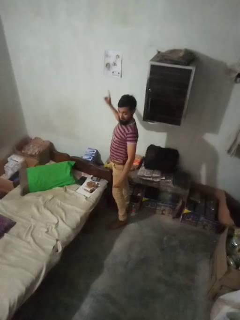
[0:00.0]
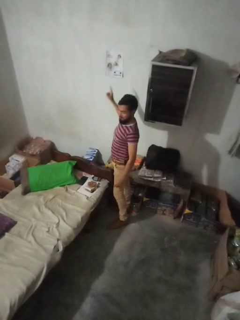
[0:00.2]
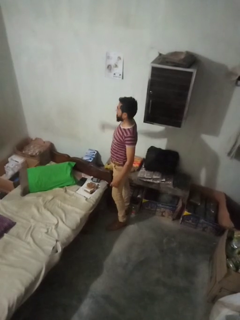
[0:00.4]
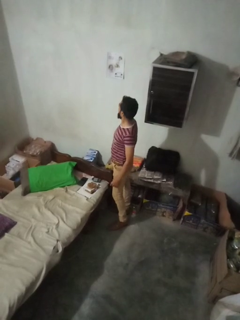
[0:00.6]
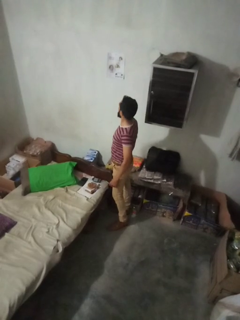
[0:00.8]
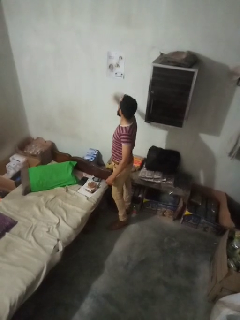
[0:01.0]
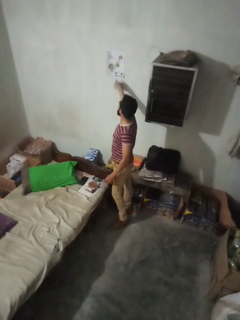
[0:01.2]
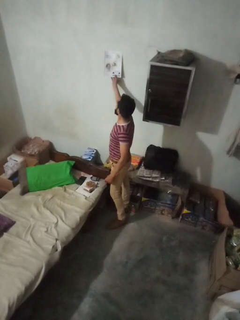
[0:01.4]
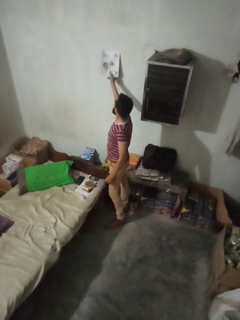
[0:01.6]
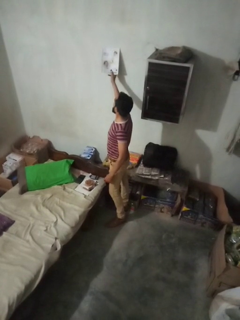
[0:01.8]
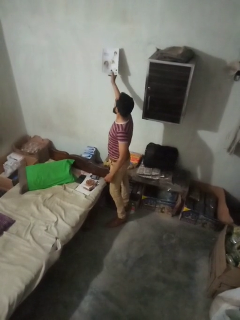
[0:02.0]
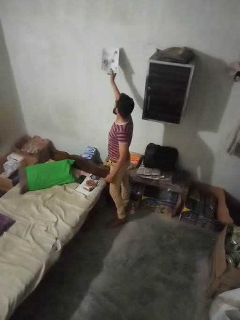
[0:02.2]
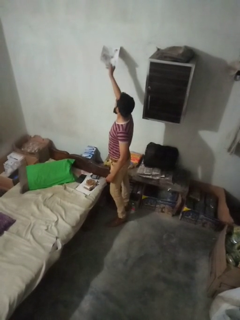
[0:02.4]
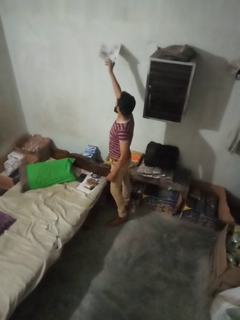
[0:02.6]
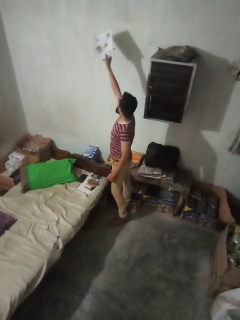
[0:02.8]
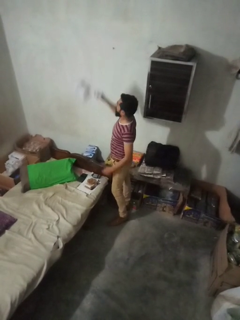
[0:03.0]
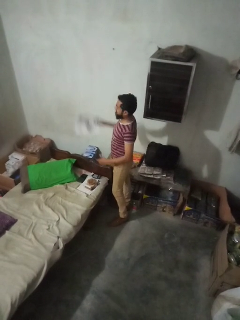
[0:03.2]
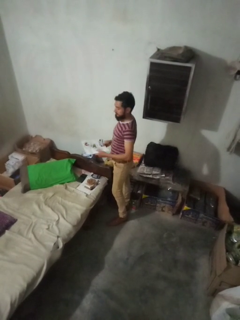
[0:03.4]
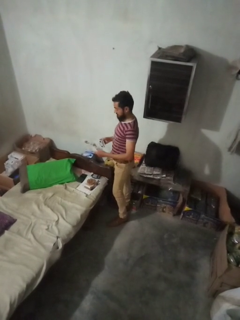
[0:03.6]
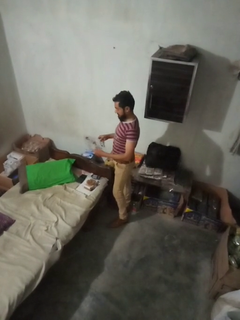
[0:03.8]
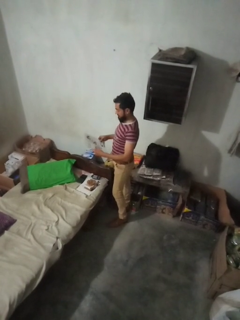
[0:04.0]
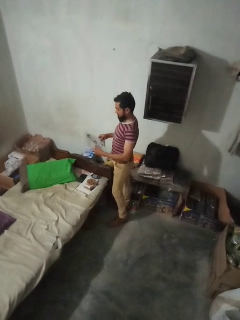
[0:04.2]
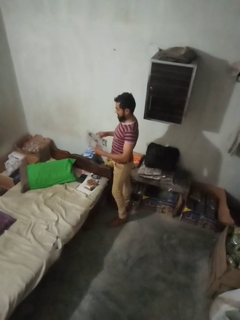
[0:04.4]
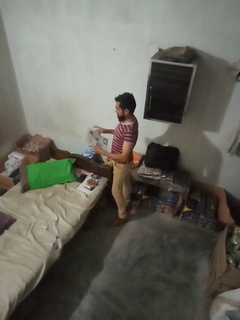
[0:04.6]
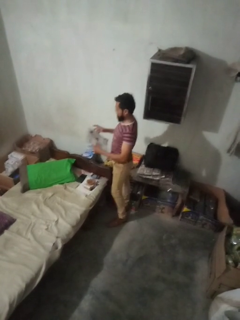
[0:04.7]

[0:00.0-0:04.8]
person takes down picture frame

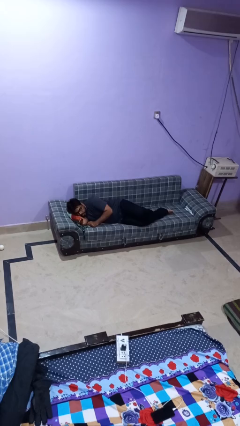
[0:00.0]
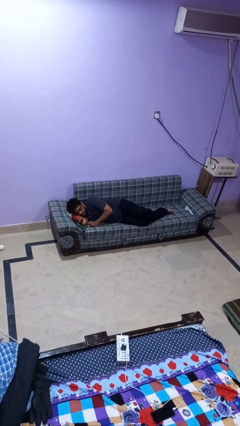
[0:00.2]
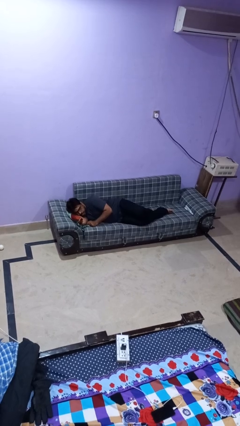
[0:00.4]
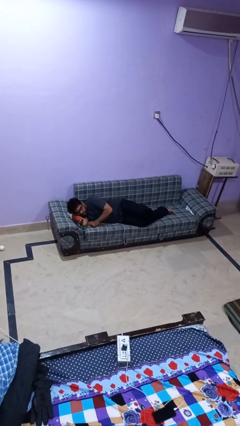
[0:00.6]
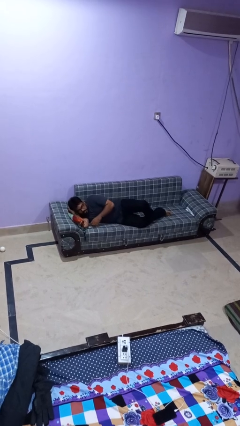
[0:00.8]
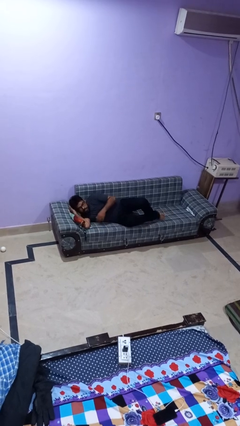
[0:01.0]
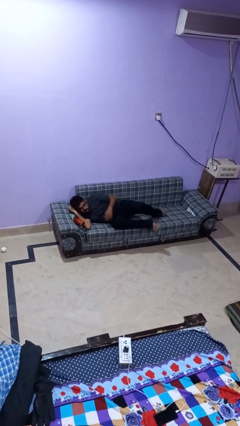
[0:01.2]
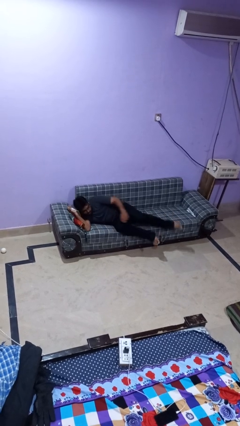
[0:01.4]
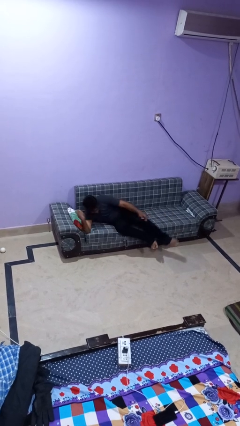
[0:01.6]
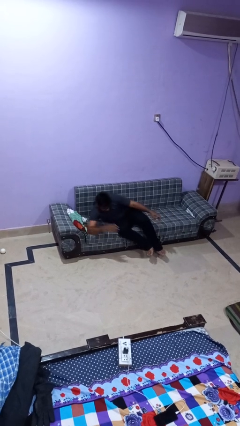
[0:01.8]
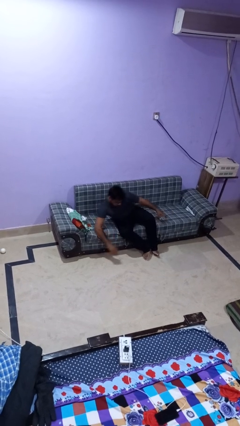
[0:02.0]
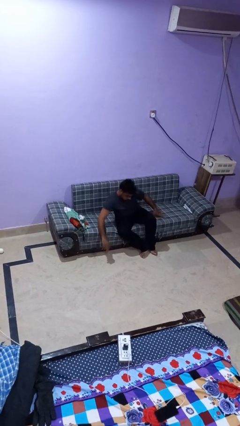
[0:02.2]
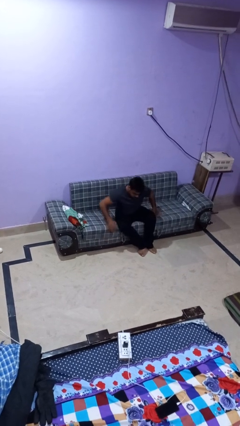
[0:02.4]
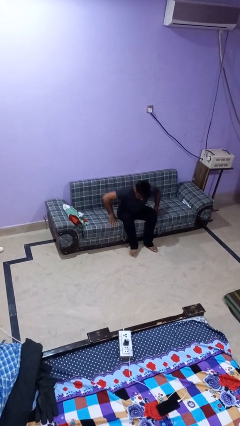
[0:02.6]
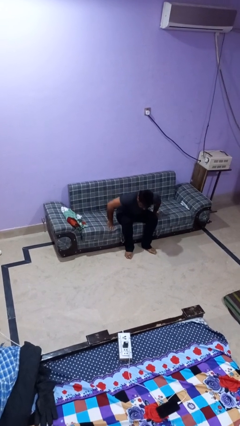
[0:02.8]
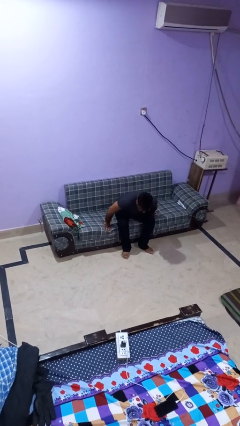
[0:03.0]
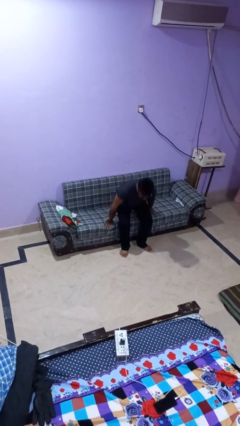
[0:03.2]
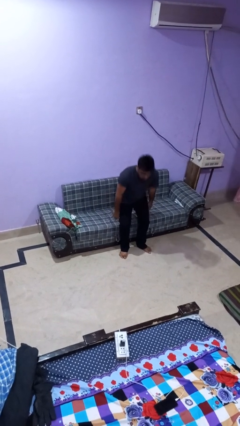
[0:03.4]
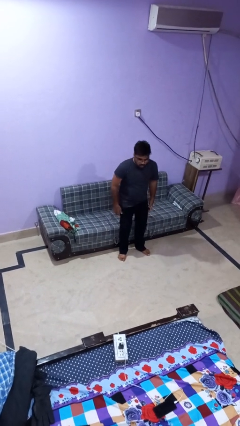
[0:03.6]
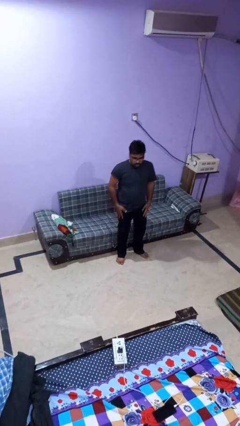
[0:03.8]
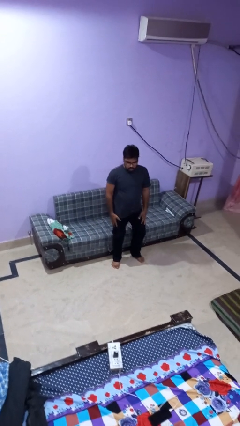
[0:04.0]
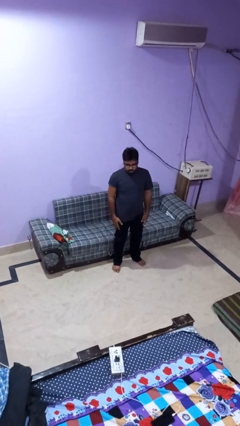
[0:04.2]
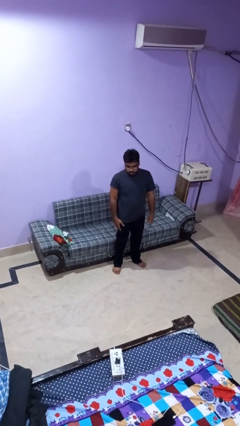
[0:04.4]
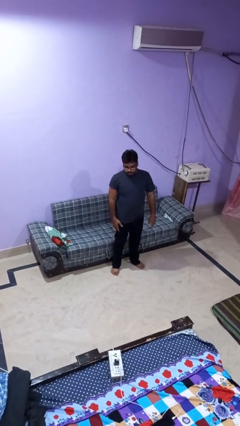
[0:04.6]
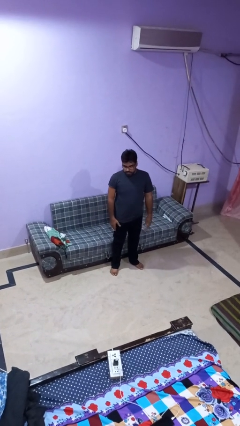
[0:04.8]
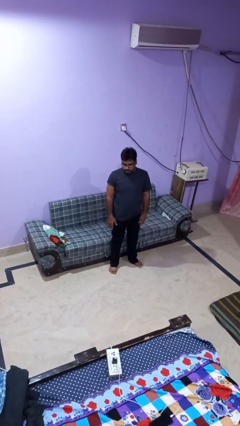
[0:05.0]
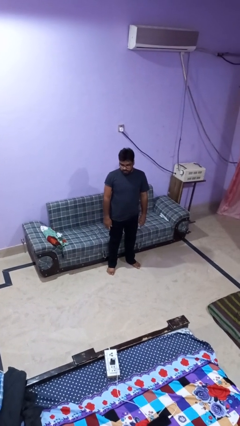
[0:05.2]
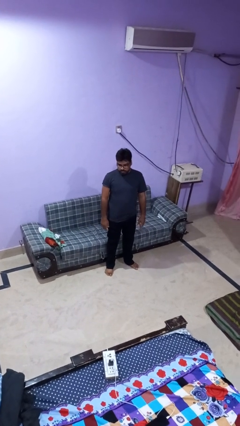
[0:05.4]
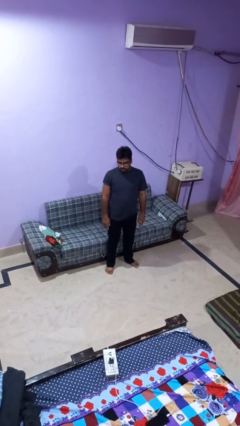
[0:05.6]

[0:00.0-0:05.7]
person stands up

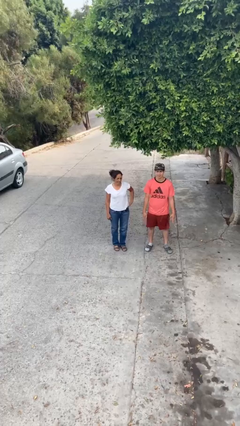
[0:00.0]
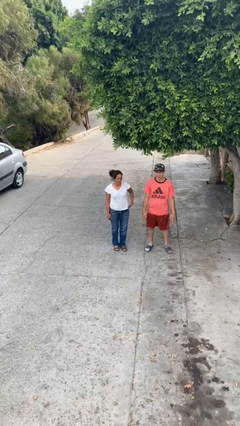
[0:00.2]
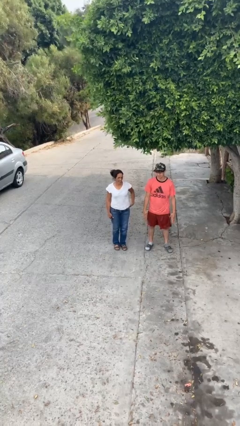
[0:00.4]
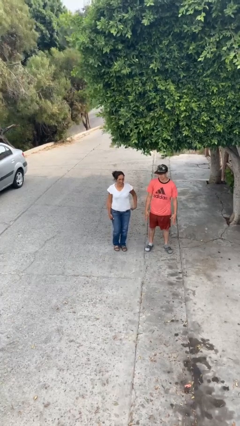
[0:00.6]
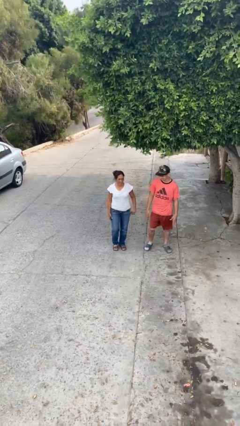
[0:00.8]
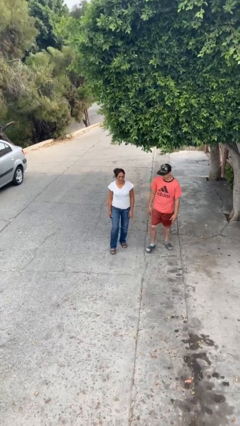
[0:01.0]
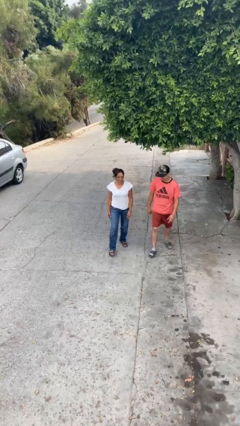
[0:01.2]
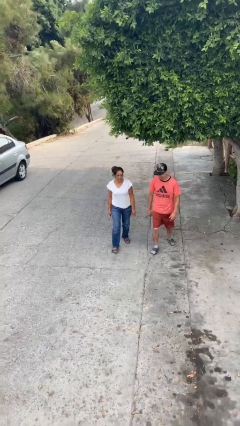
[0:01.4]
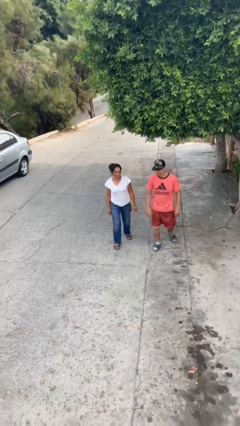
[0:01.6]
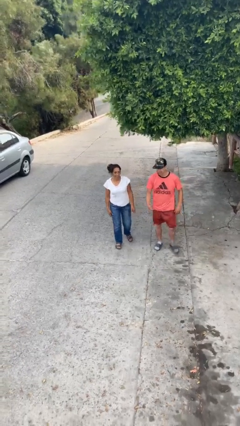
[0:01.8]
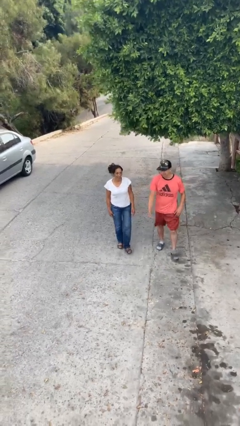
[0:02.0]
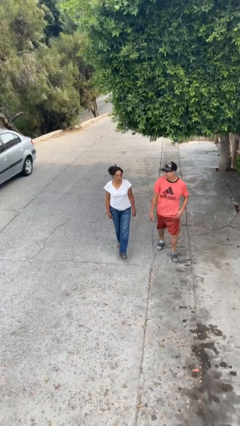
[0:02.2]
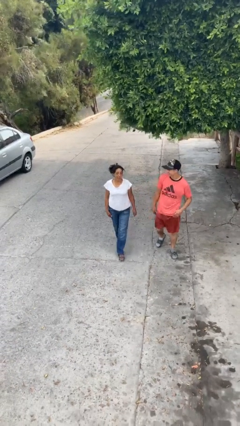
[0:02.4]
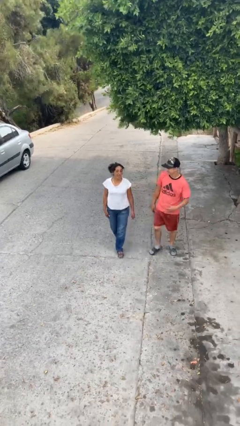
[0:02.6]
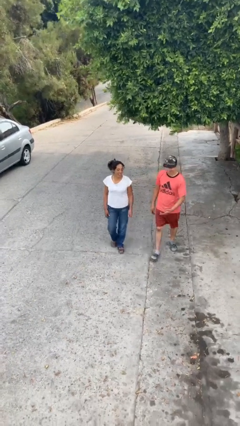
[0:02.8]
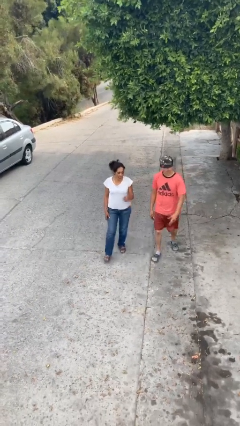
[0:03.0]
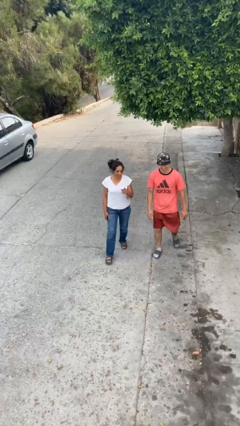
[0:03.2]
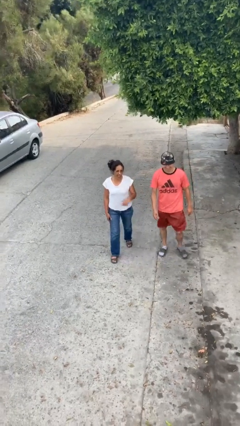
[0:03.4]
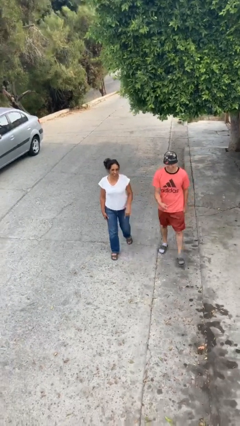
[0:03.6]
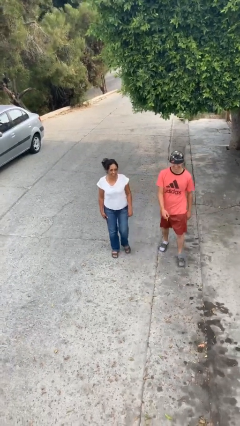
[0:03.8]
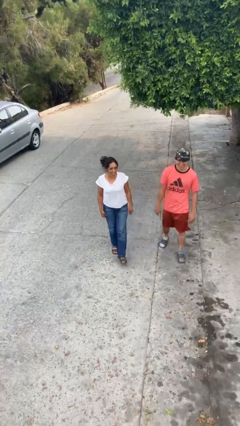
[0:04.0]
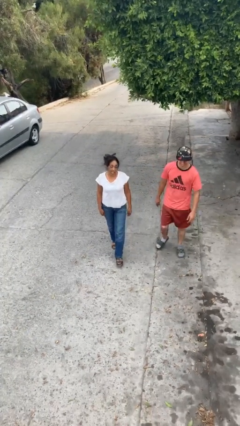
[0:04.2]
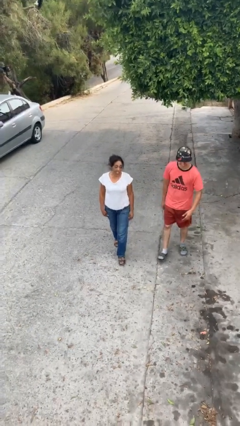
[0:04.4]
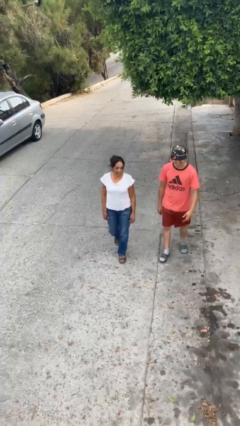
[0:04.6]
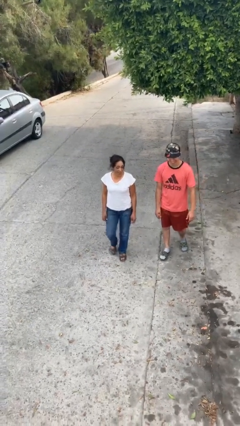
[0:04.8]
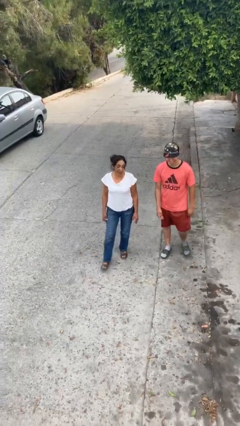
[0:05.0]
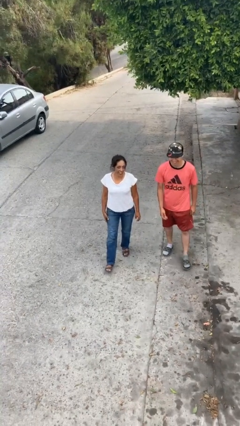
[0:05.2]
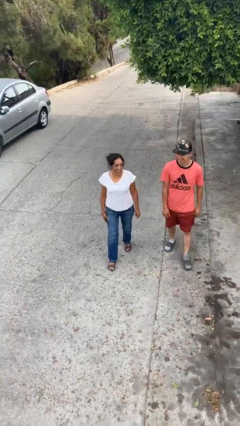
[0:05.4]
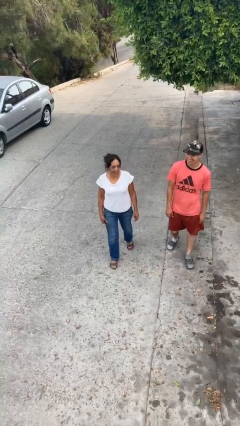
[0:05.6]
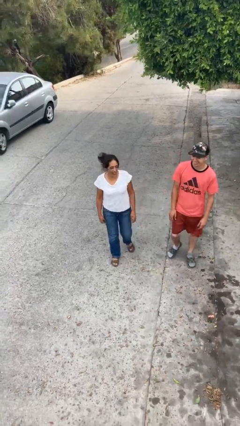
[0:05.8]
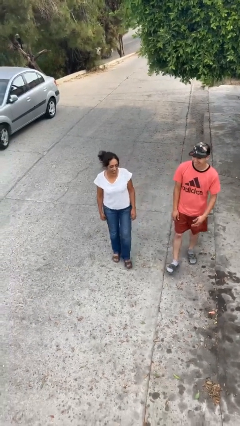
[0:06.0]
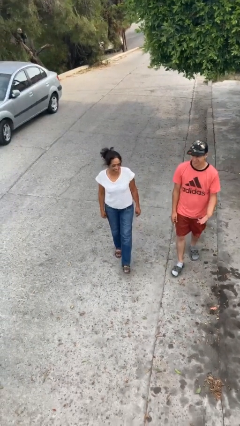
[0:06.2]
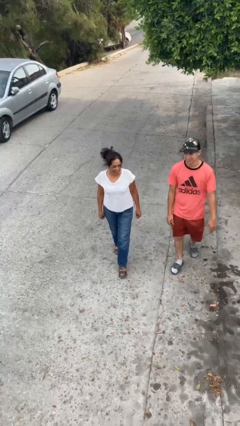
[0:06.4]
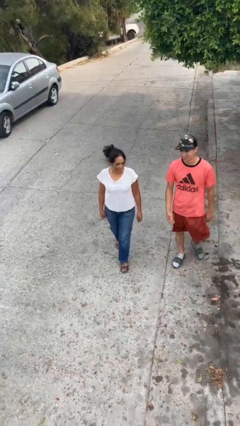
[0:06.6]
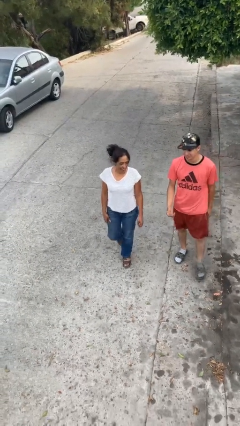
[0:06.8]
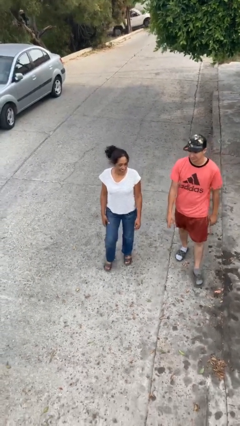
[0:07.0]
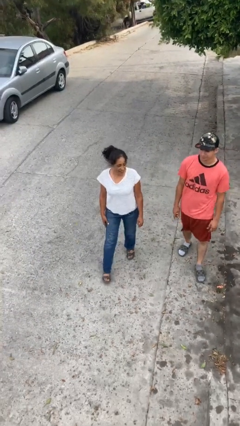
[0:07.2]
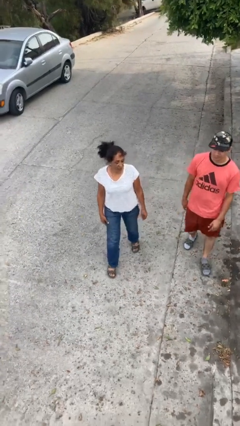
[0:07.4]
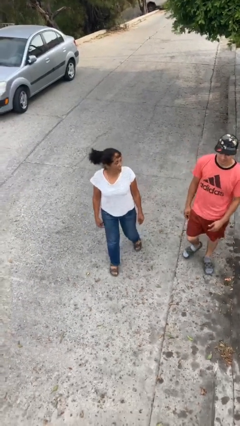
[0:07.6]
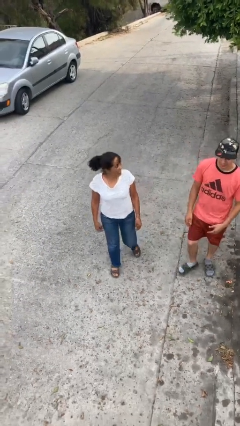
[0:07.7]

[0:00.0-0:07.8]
person talks to person

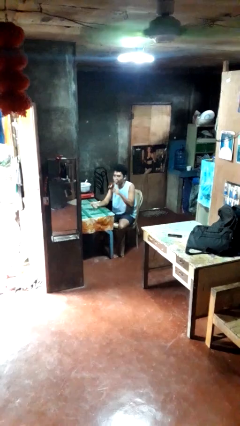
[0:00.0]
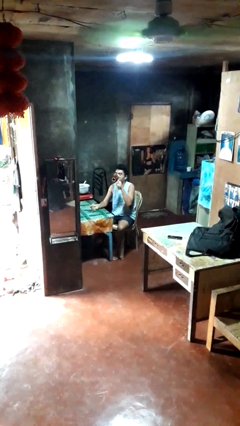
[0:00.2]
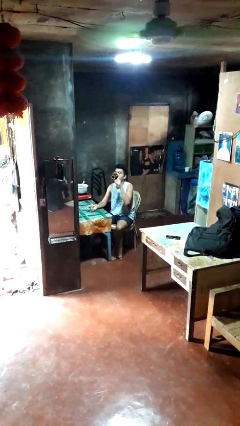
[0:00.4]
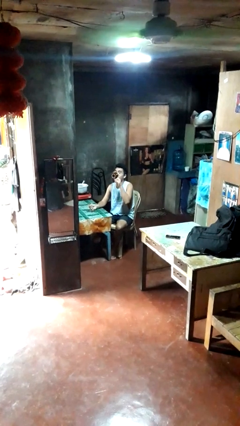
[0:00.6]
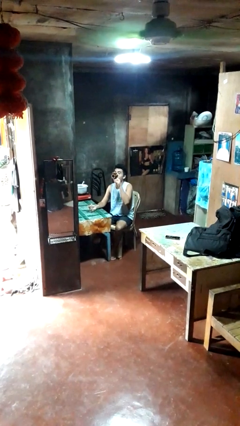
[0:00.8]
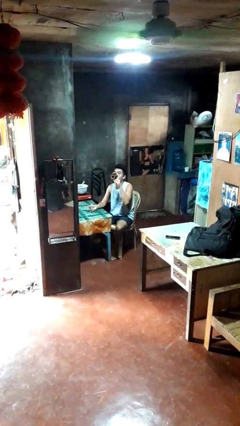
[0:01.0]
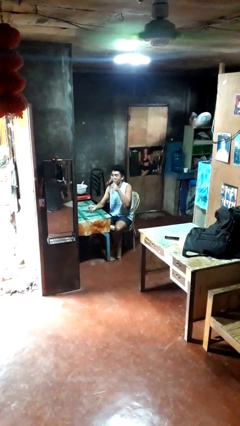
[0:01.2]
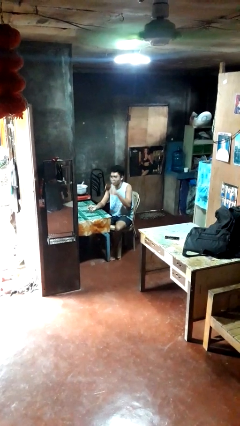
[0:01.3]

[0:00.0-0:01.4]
person drinks from mug
